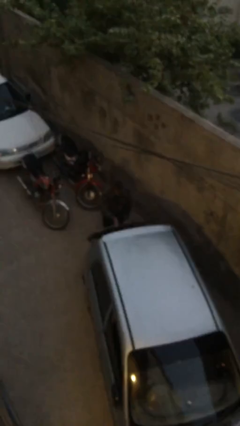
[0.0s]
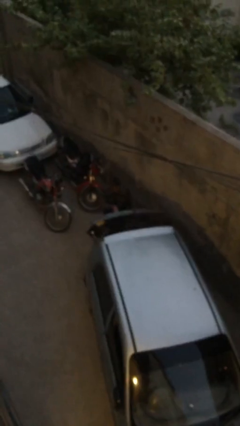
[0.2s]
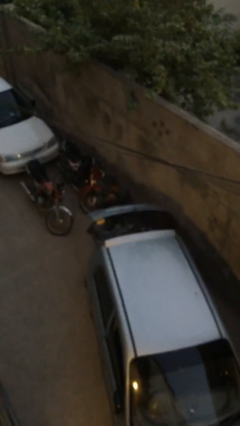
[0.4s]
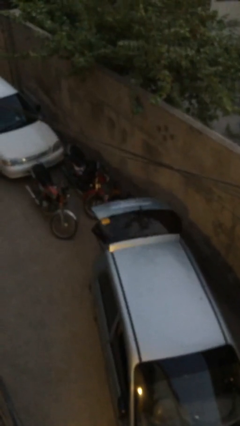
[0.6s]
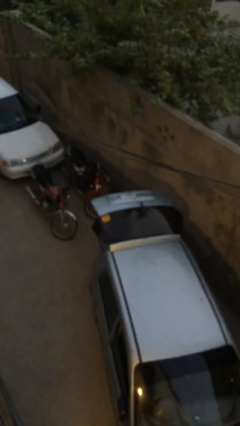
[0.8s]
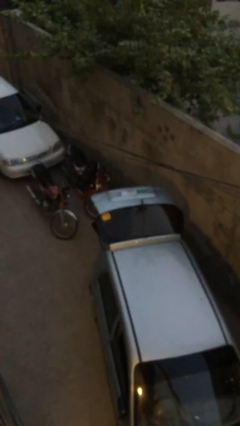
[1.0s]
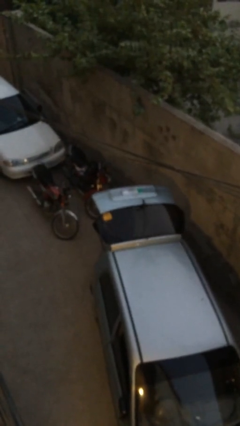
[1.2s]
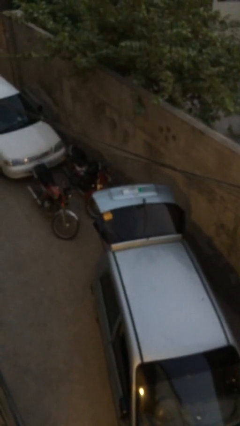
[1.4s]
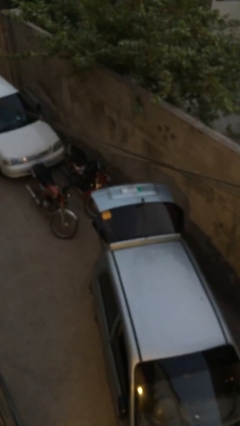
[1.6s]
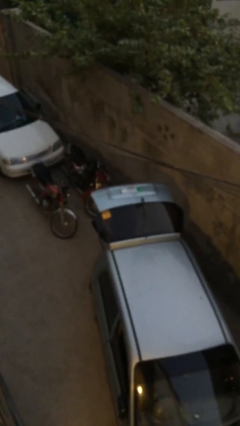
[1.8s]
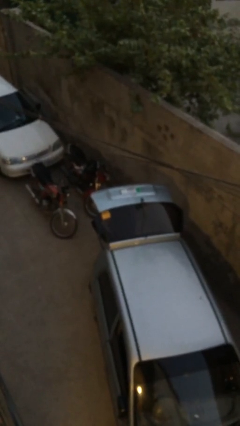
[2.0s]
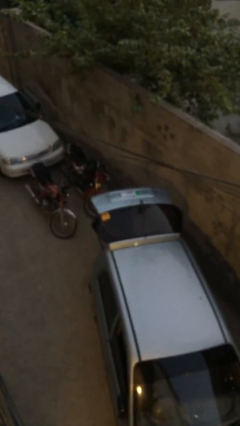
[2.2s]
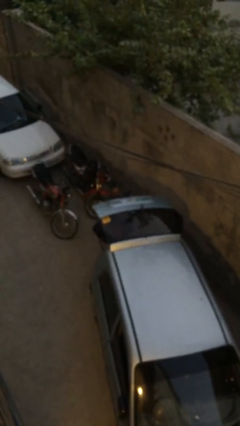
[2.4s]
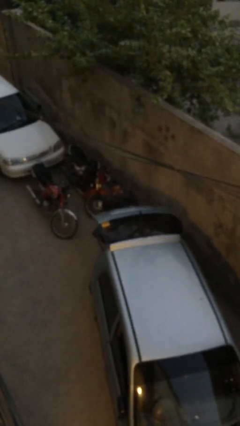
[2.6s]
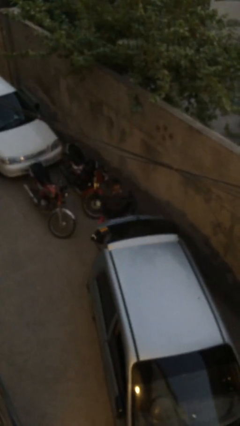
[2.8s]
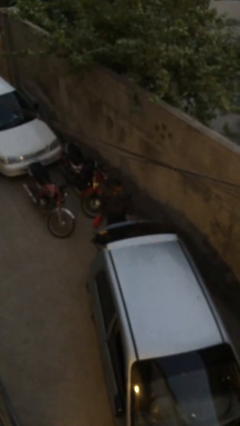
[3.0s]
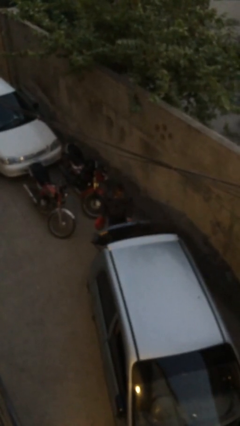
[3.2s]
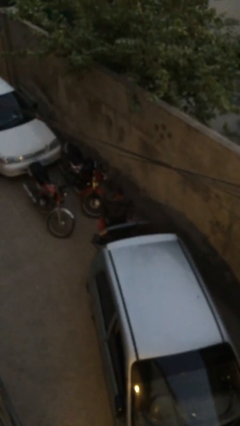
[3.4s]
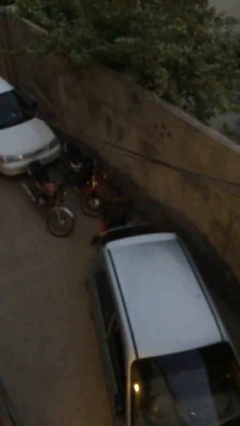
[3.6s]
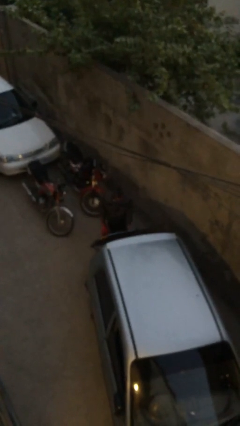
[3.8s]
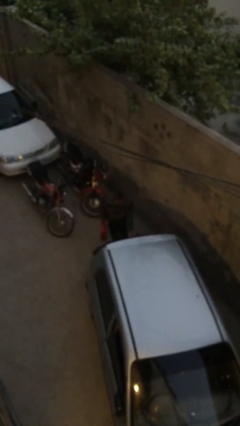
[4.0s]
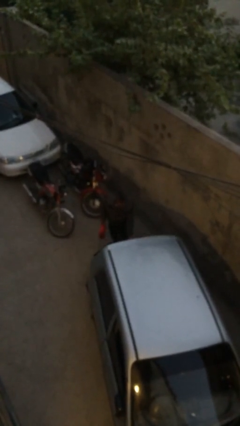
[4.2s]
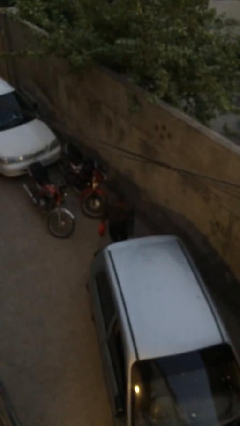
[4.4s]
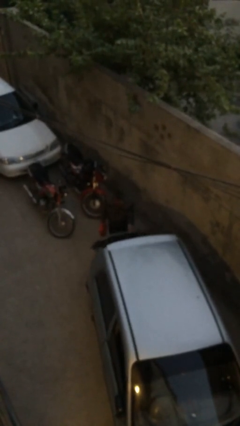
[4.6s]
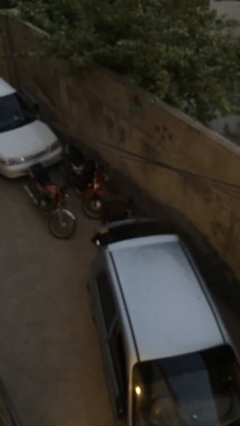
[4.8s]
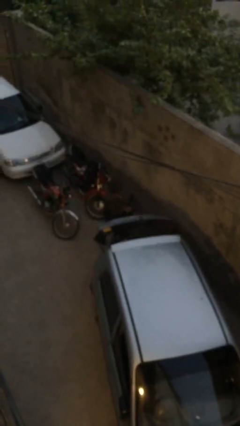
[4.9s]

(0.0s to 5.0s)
person unloads car

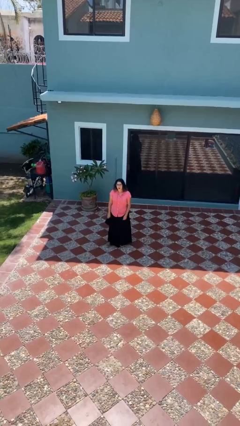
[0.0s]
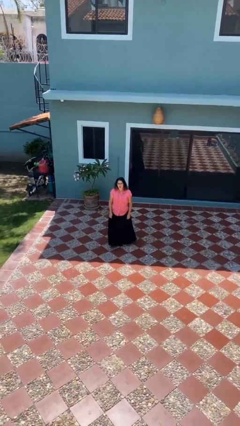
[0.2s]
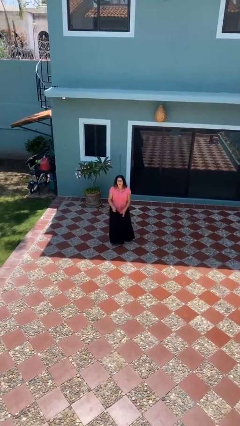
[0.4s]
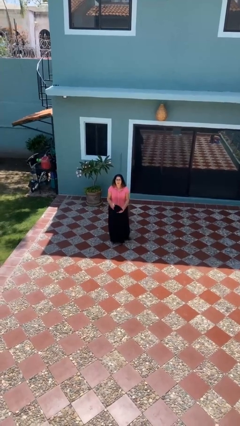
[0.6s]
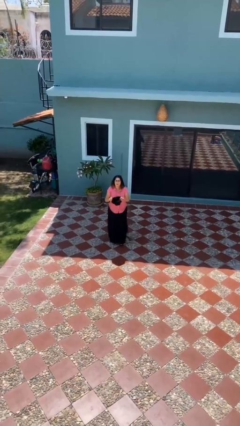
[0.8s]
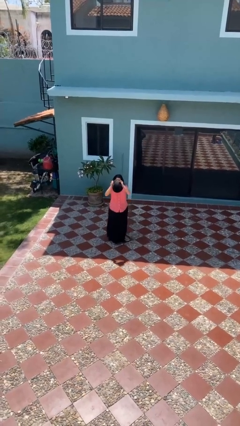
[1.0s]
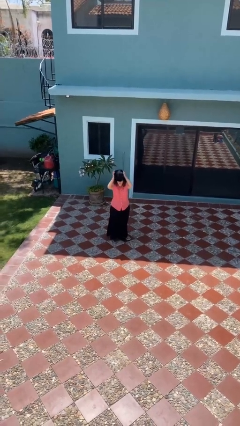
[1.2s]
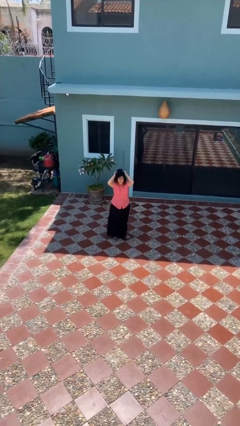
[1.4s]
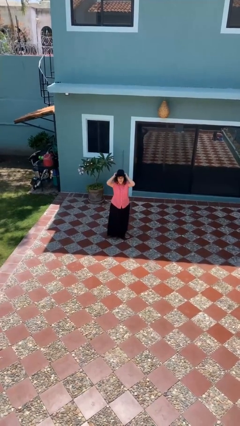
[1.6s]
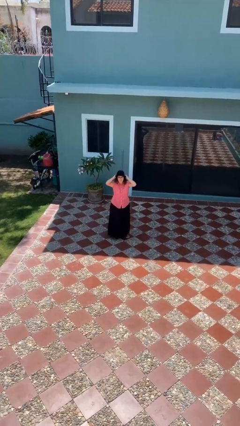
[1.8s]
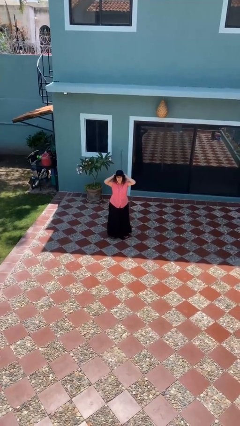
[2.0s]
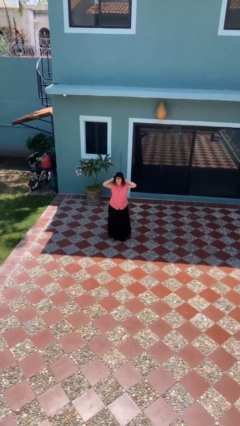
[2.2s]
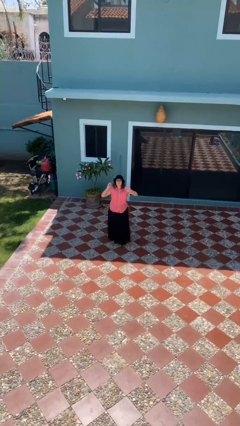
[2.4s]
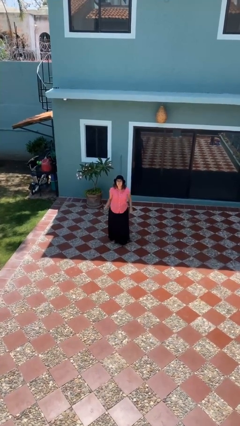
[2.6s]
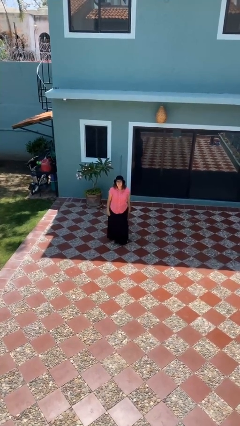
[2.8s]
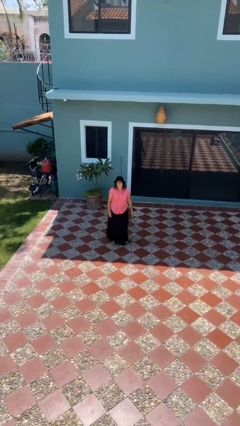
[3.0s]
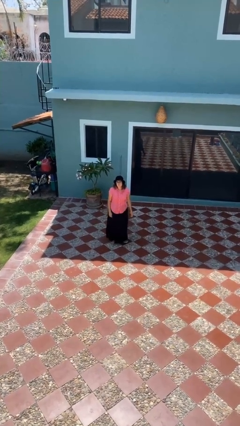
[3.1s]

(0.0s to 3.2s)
person puts on hat

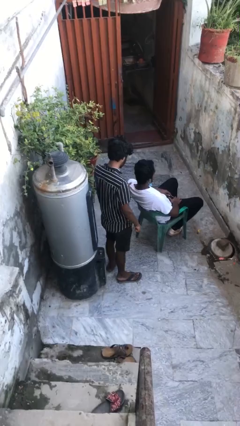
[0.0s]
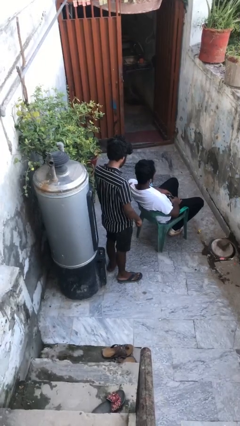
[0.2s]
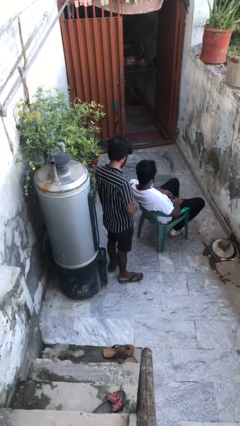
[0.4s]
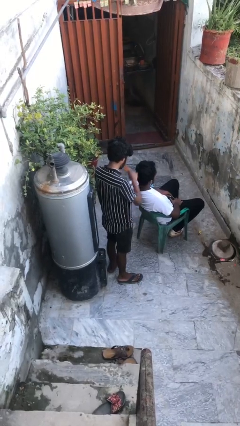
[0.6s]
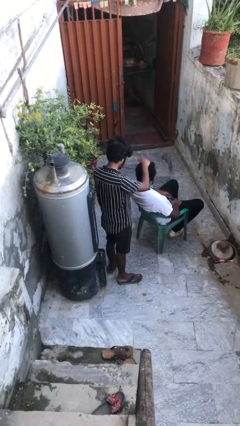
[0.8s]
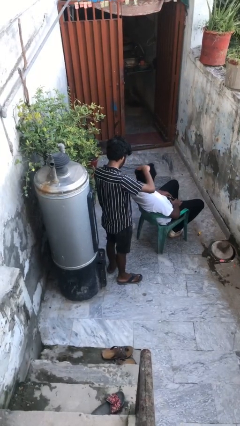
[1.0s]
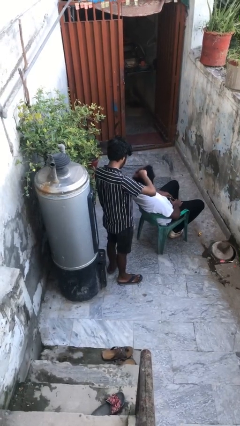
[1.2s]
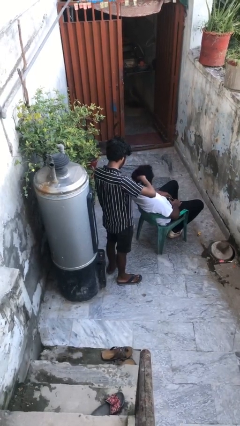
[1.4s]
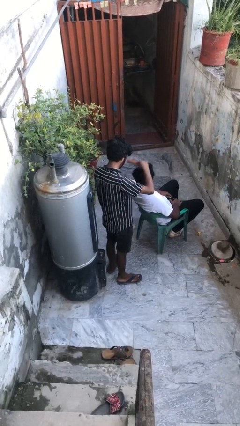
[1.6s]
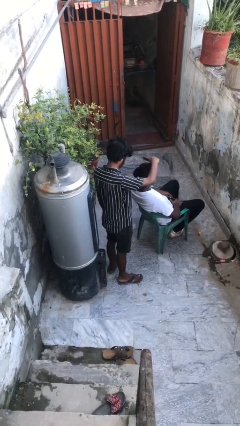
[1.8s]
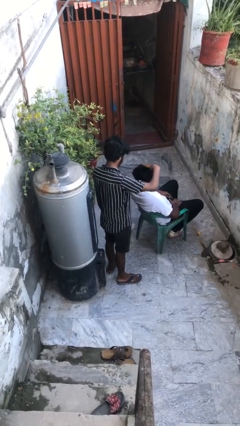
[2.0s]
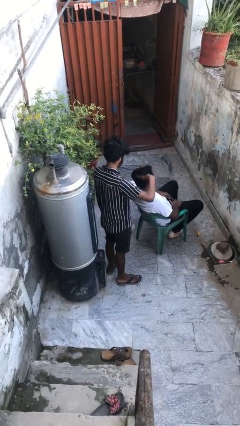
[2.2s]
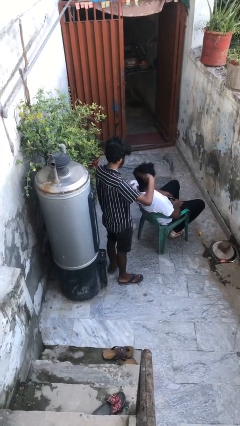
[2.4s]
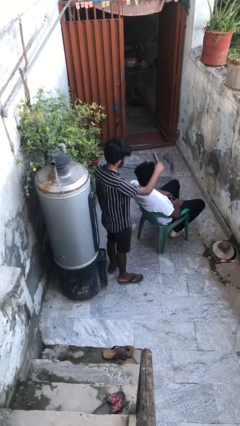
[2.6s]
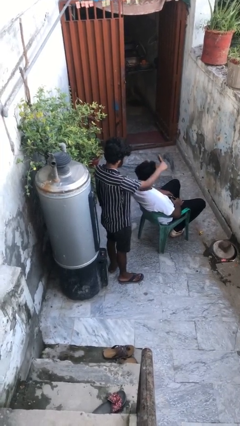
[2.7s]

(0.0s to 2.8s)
person brushes hair of person

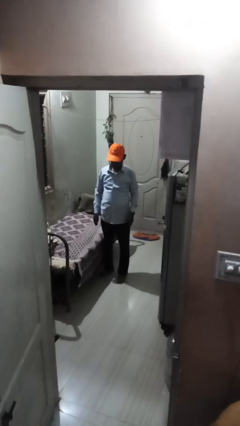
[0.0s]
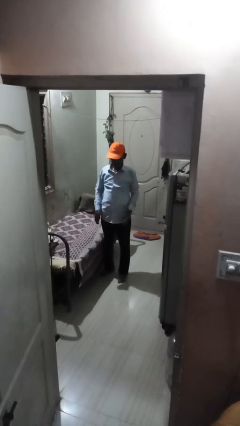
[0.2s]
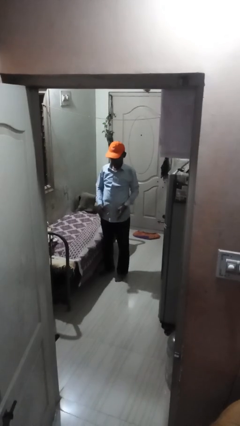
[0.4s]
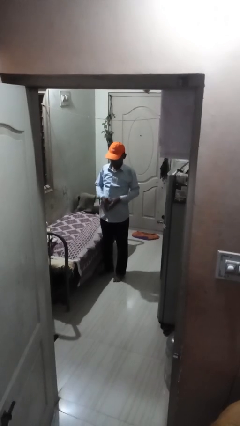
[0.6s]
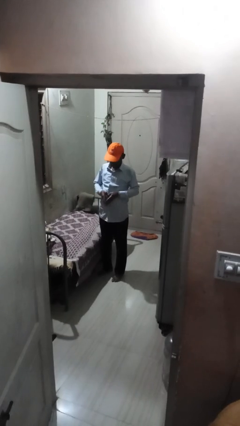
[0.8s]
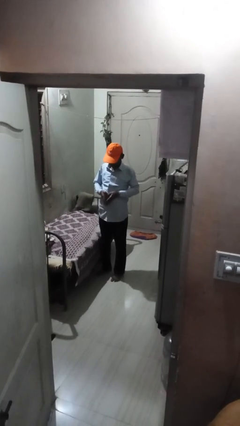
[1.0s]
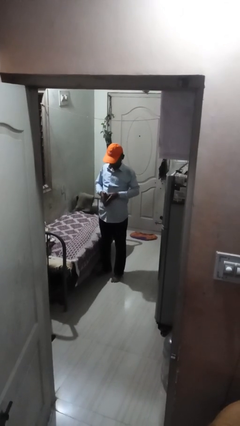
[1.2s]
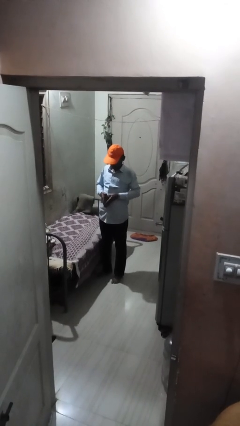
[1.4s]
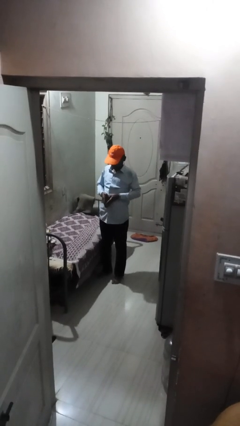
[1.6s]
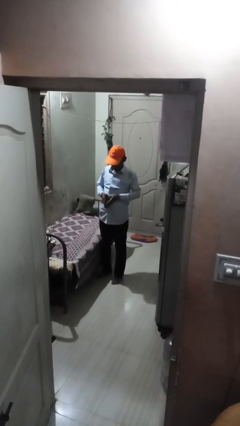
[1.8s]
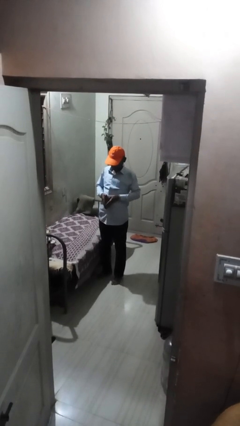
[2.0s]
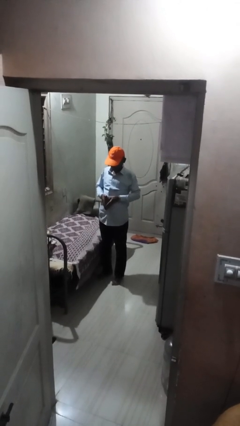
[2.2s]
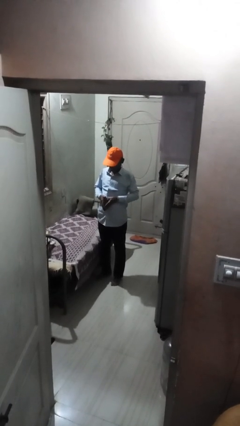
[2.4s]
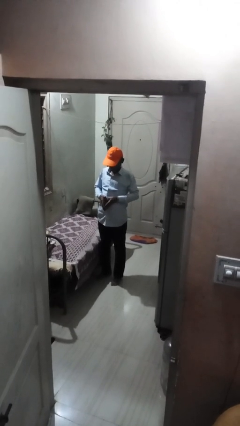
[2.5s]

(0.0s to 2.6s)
person gestures heart

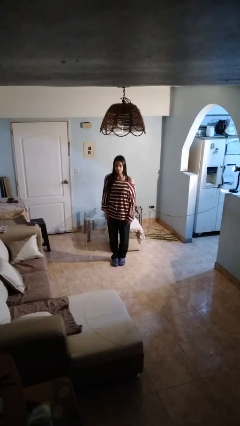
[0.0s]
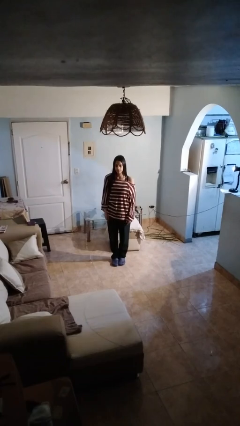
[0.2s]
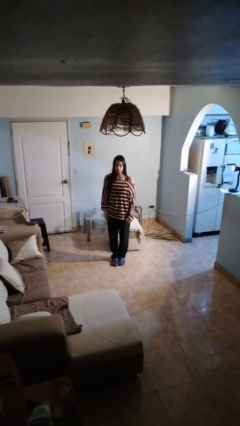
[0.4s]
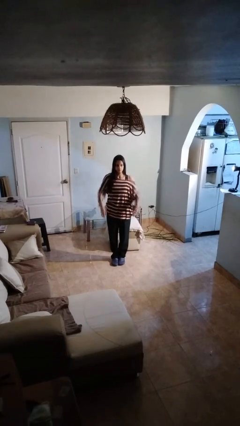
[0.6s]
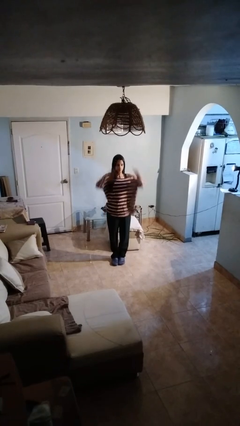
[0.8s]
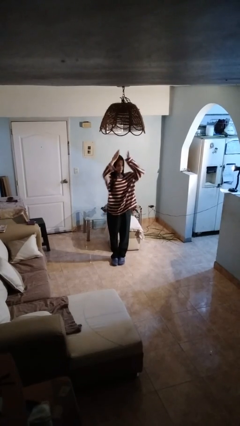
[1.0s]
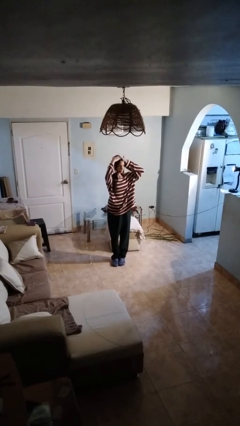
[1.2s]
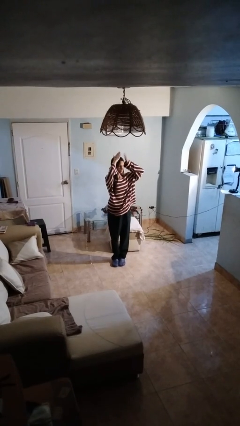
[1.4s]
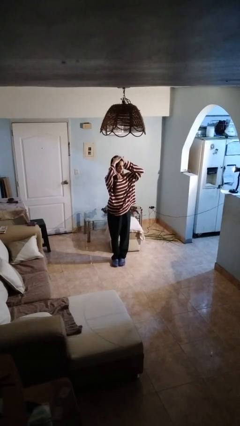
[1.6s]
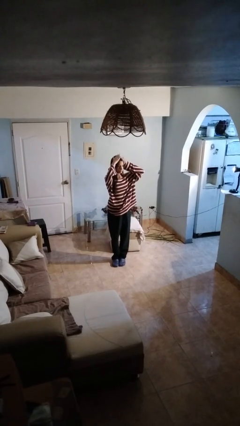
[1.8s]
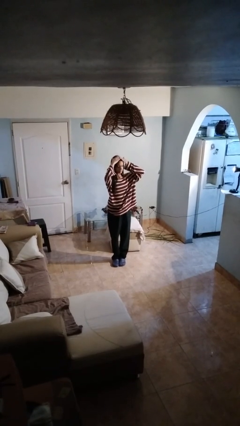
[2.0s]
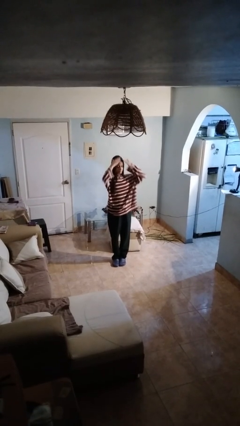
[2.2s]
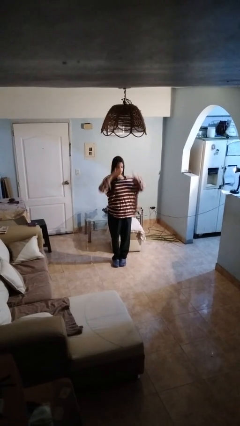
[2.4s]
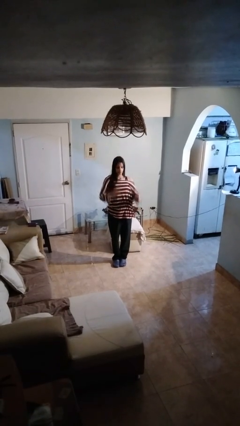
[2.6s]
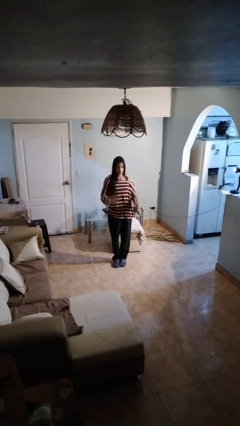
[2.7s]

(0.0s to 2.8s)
person pats head

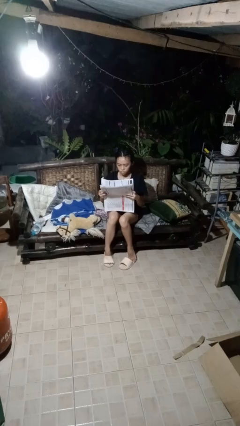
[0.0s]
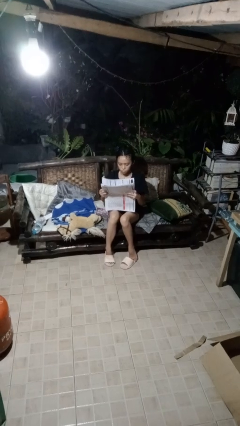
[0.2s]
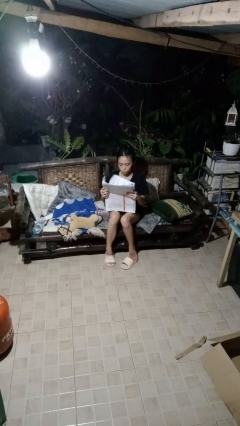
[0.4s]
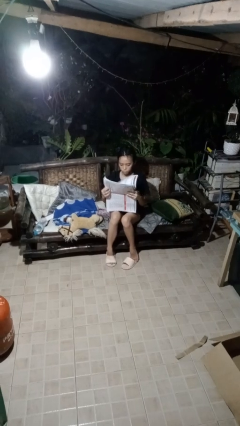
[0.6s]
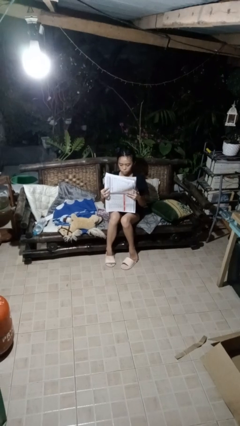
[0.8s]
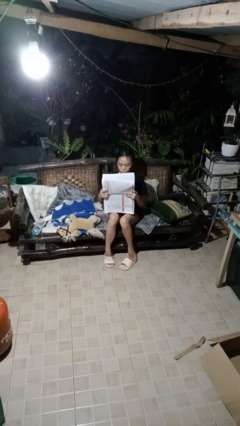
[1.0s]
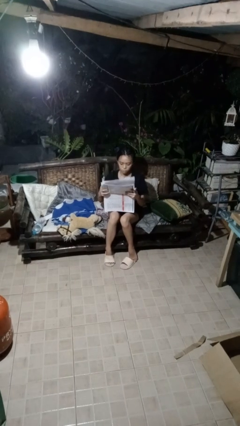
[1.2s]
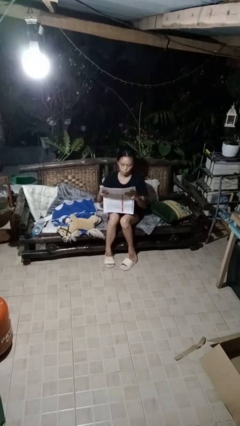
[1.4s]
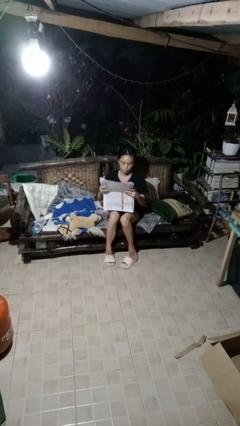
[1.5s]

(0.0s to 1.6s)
person reads newspaper
